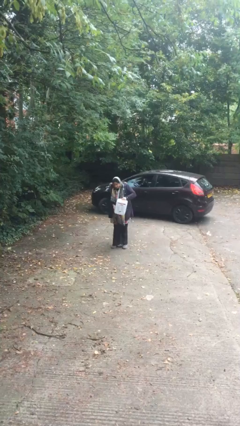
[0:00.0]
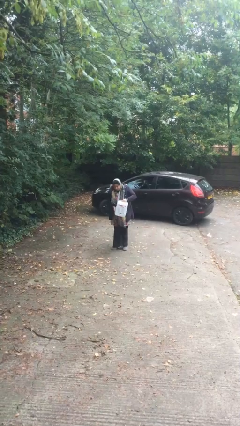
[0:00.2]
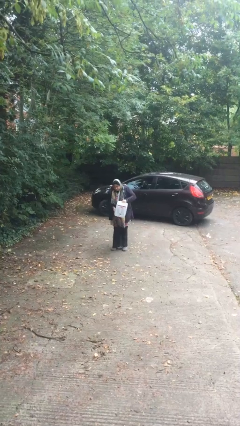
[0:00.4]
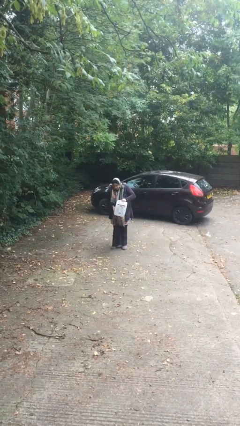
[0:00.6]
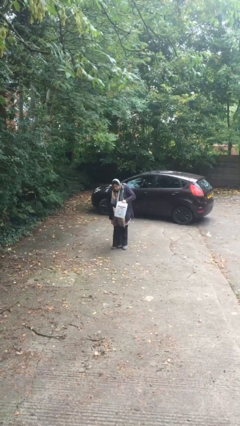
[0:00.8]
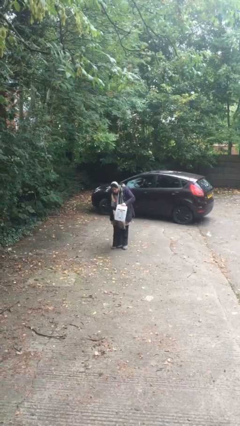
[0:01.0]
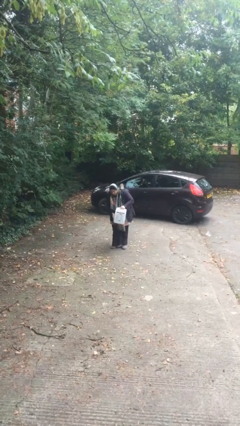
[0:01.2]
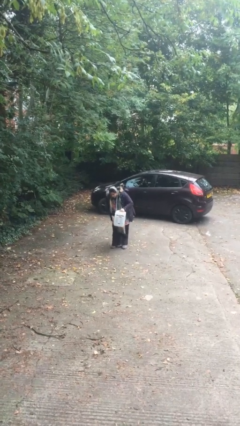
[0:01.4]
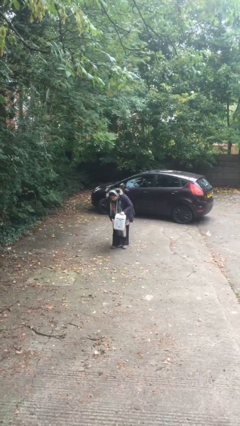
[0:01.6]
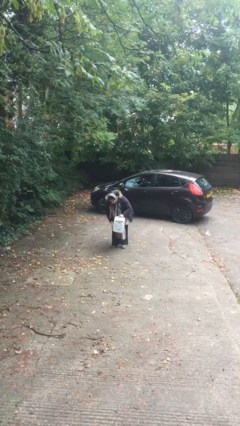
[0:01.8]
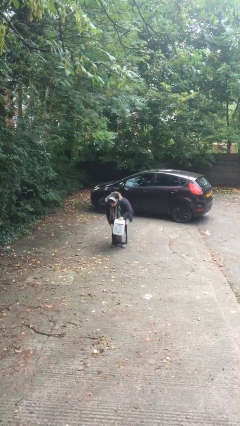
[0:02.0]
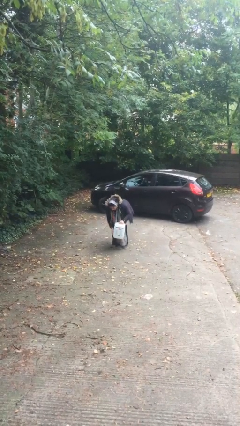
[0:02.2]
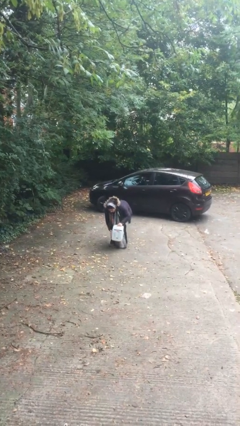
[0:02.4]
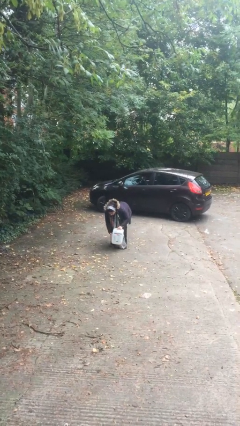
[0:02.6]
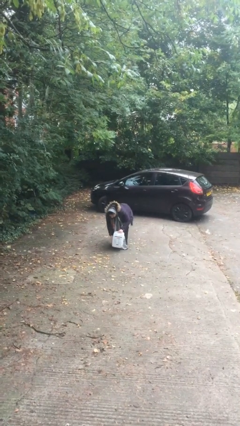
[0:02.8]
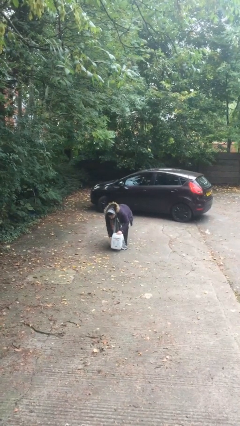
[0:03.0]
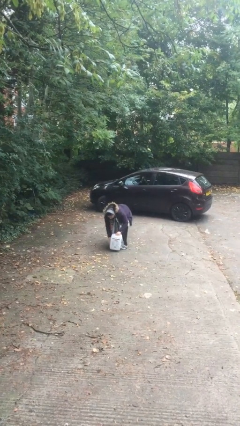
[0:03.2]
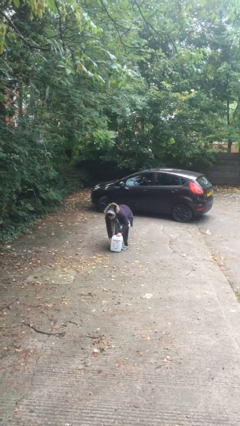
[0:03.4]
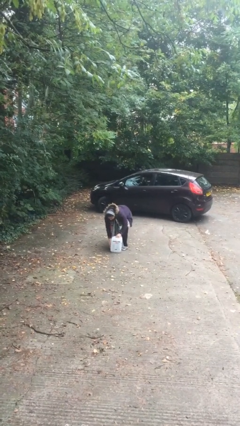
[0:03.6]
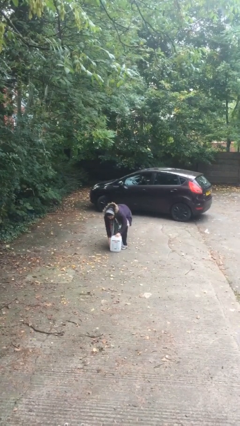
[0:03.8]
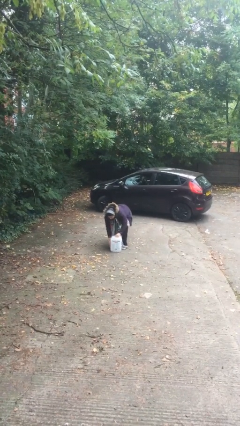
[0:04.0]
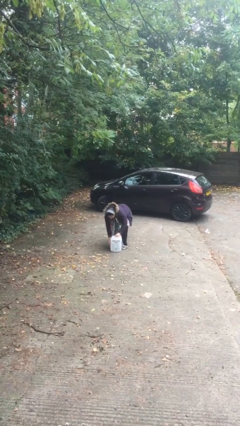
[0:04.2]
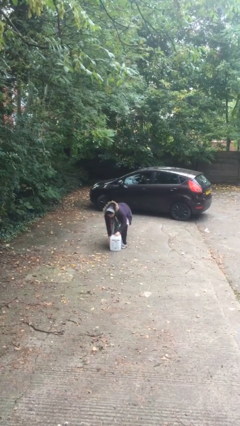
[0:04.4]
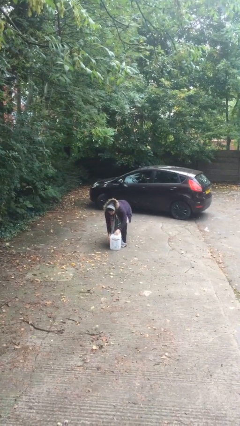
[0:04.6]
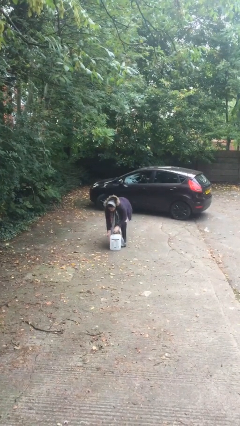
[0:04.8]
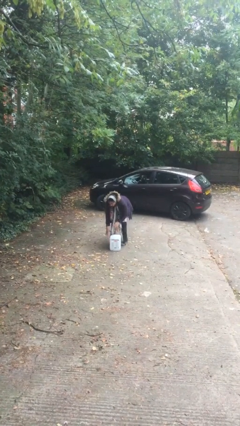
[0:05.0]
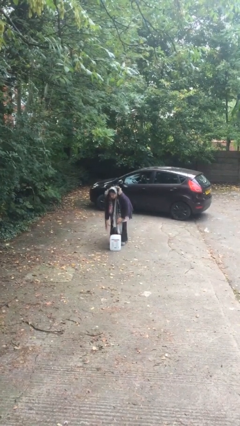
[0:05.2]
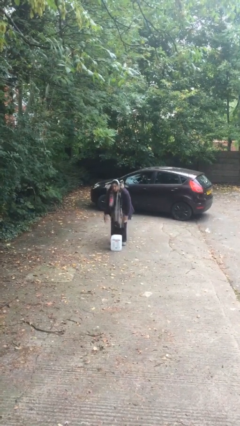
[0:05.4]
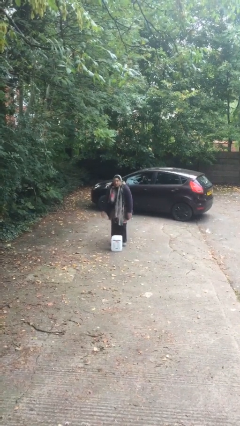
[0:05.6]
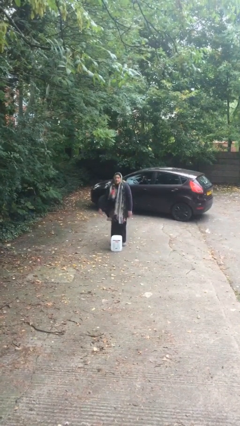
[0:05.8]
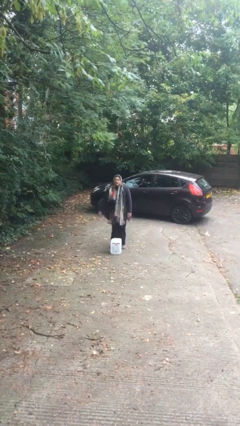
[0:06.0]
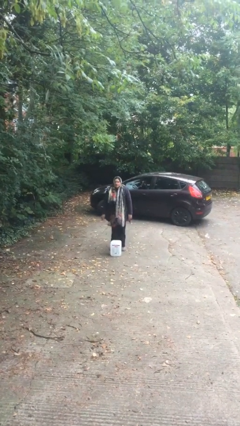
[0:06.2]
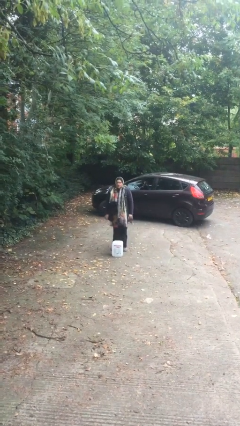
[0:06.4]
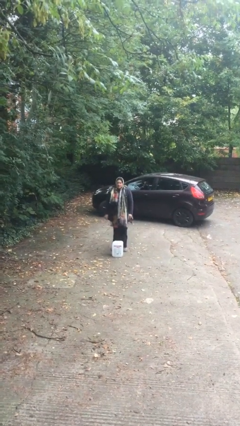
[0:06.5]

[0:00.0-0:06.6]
person puts down object on floor

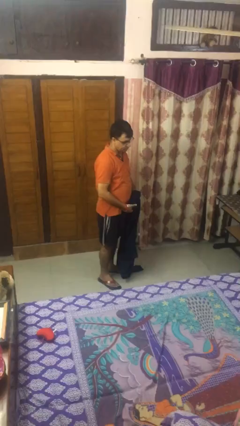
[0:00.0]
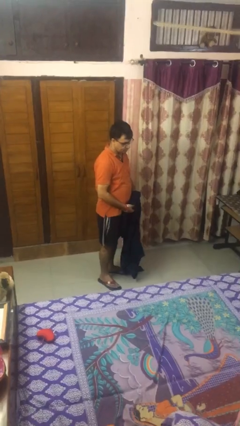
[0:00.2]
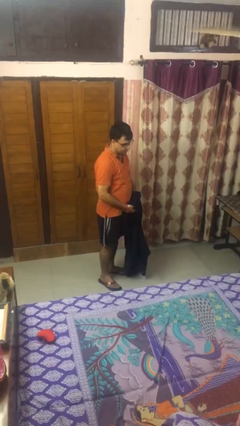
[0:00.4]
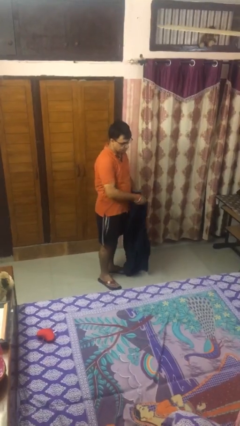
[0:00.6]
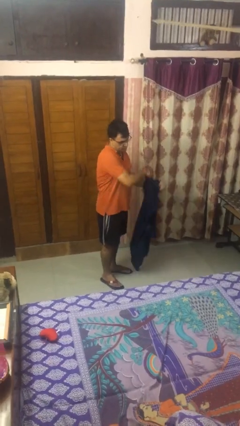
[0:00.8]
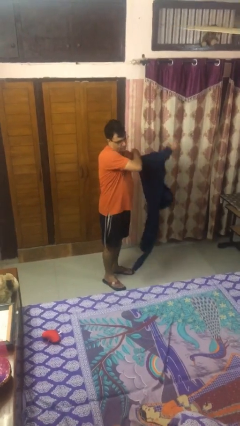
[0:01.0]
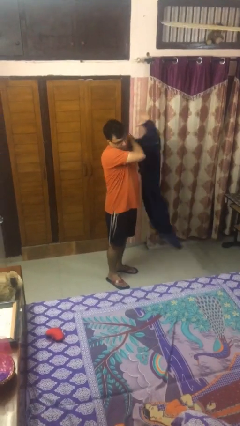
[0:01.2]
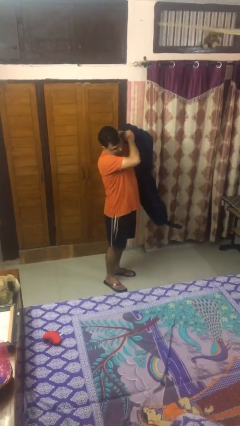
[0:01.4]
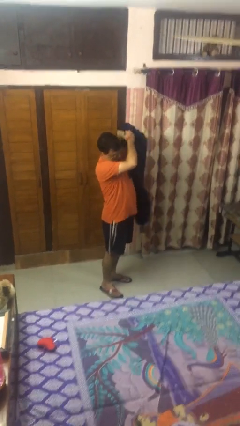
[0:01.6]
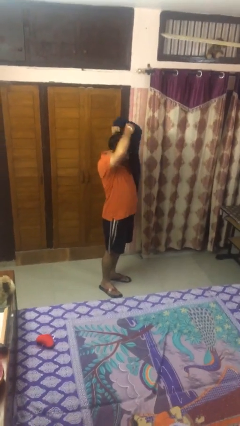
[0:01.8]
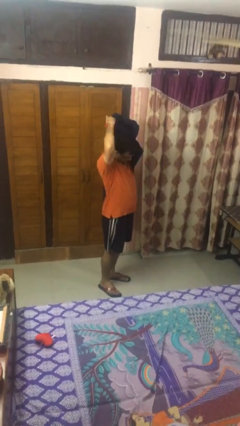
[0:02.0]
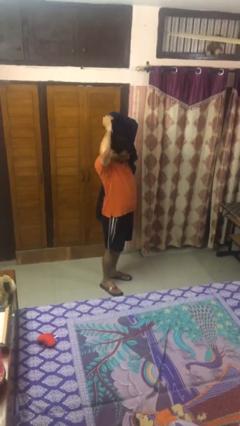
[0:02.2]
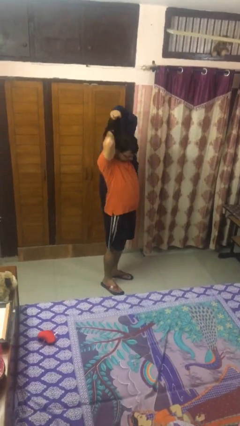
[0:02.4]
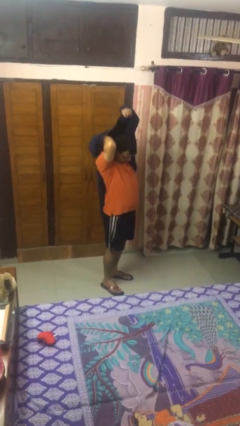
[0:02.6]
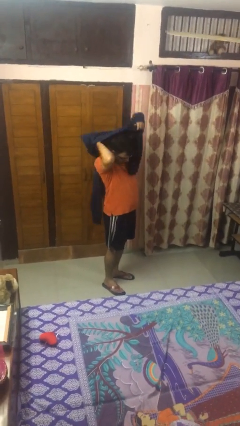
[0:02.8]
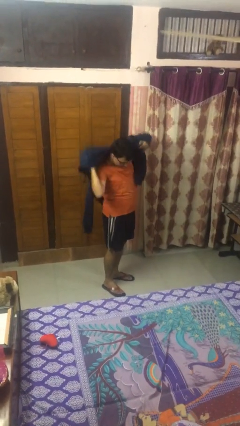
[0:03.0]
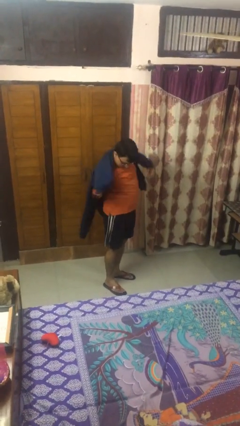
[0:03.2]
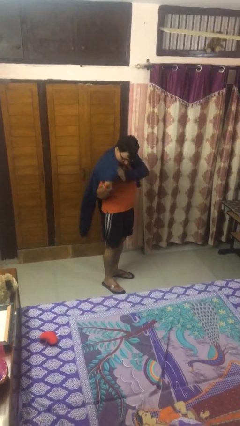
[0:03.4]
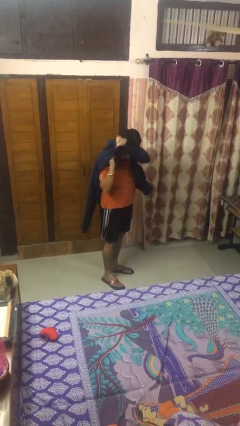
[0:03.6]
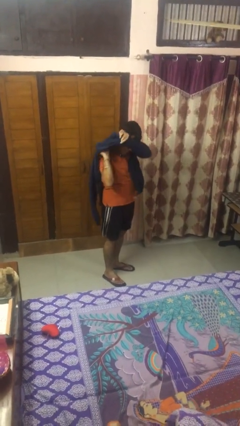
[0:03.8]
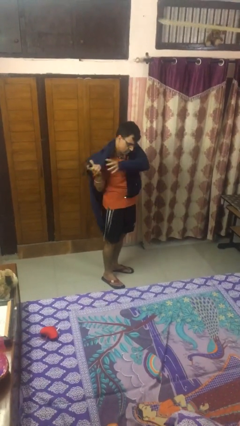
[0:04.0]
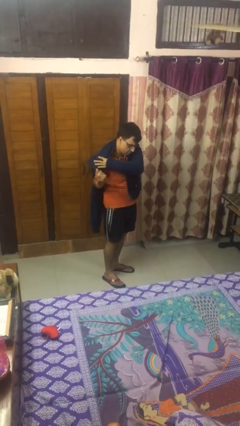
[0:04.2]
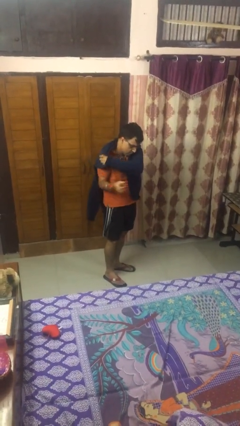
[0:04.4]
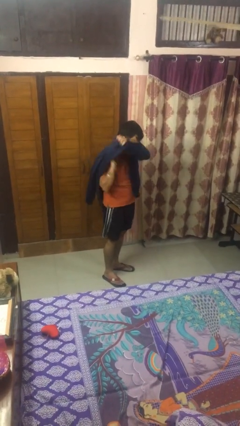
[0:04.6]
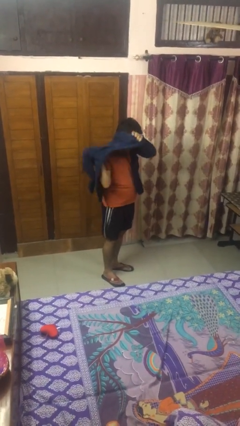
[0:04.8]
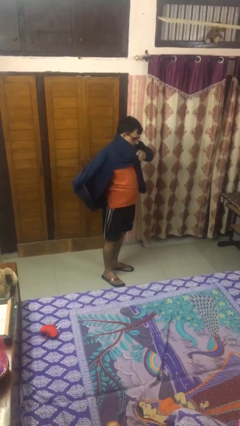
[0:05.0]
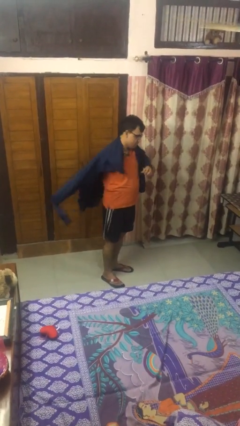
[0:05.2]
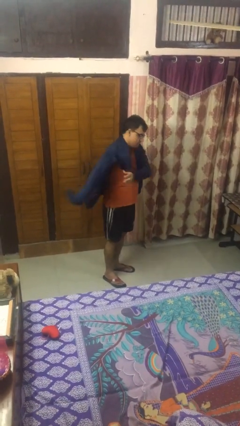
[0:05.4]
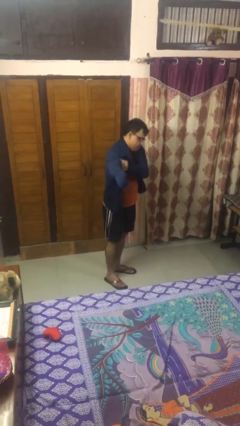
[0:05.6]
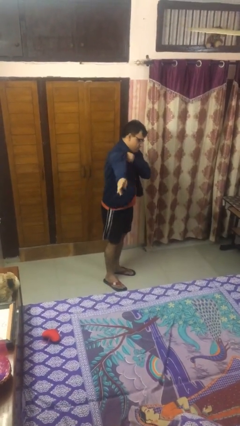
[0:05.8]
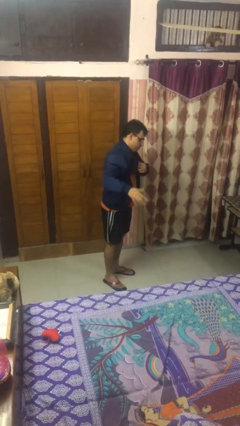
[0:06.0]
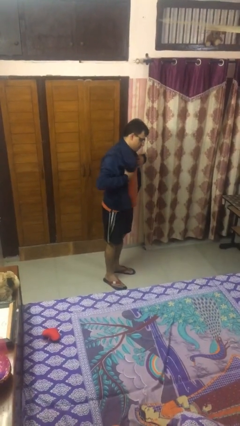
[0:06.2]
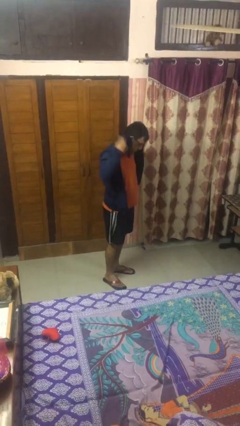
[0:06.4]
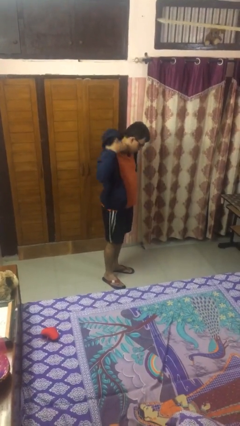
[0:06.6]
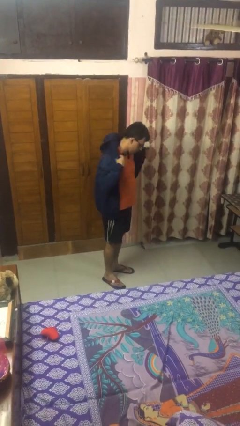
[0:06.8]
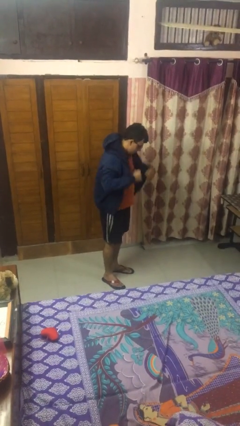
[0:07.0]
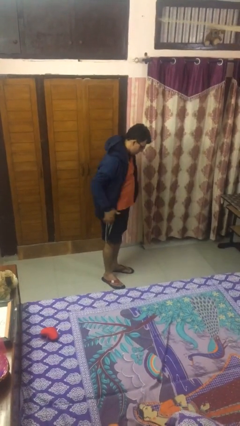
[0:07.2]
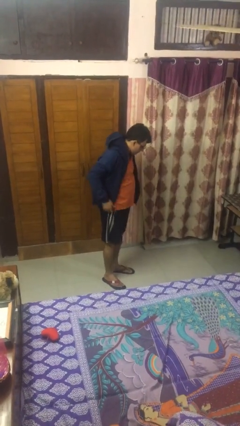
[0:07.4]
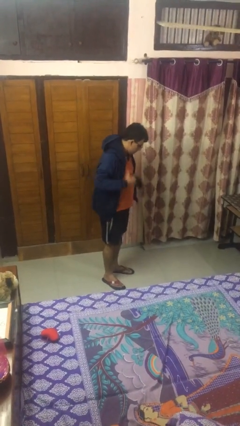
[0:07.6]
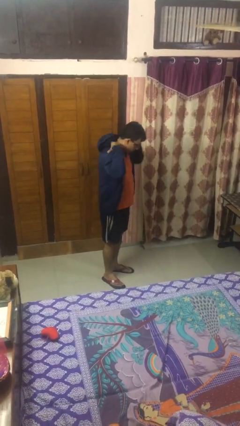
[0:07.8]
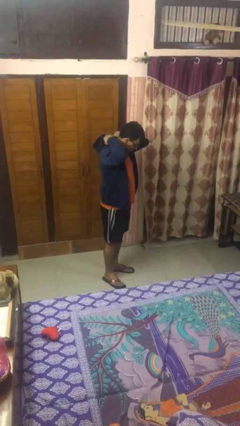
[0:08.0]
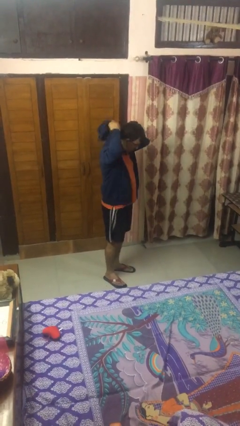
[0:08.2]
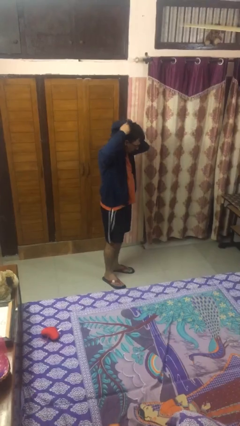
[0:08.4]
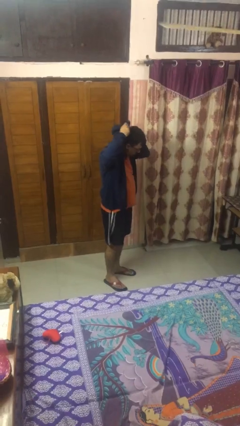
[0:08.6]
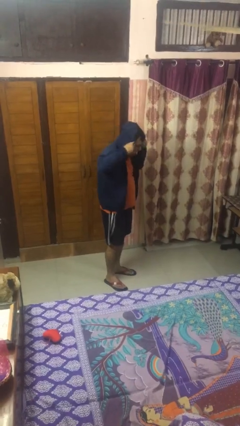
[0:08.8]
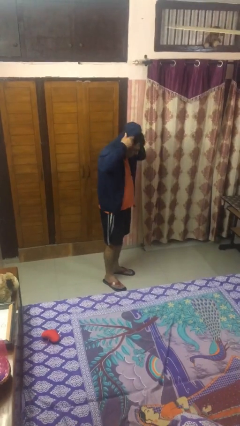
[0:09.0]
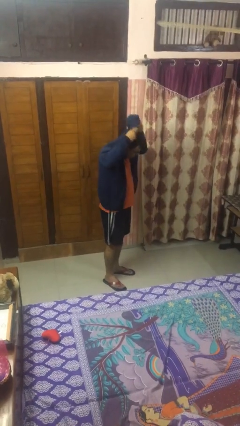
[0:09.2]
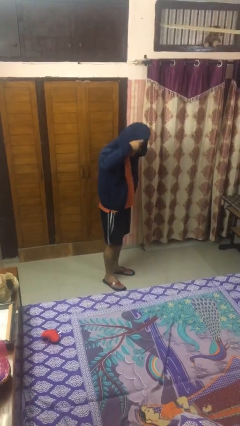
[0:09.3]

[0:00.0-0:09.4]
person puts on hoodie

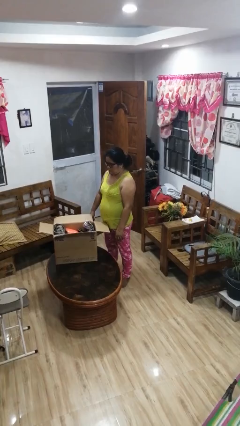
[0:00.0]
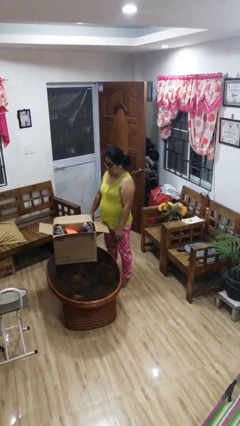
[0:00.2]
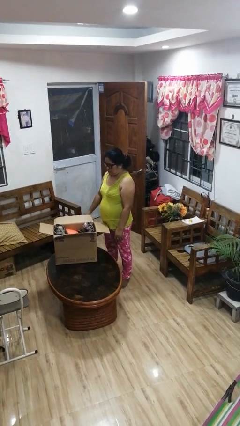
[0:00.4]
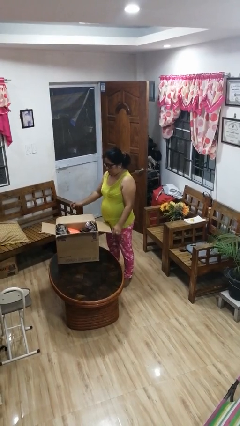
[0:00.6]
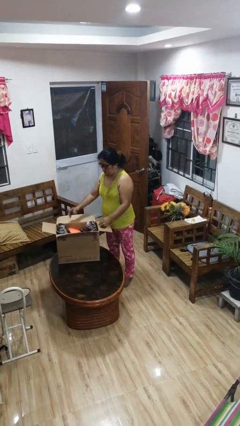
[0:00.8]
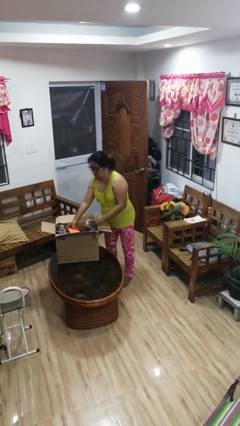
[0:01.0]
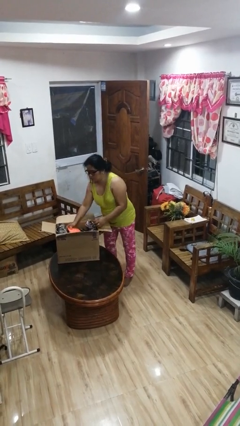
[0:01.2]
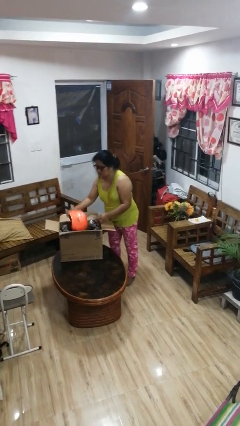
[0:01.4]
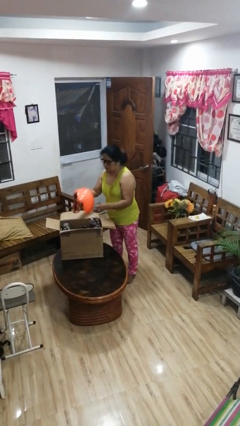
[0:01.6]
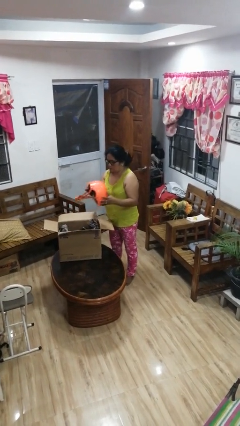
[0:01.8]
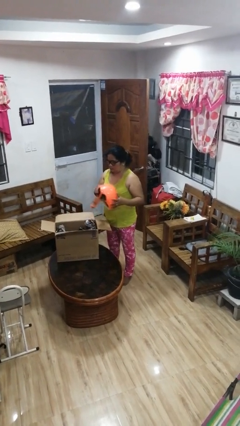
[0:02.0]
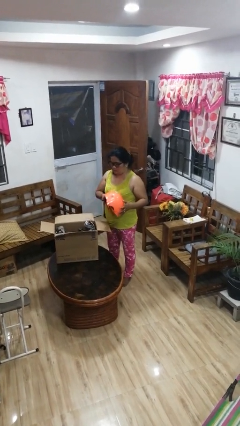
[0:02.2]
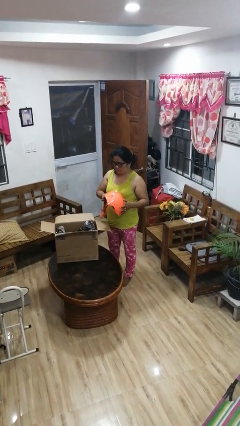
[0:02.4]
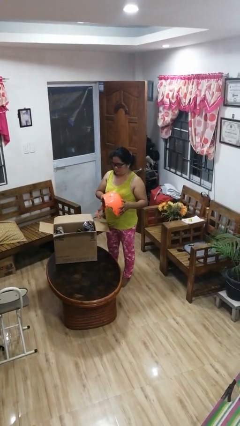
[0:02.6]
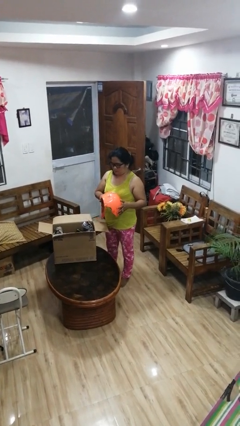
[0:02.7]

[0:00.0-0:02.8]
person takes object from box
